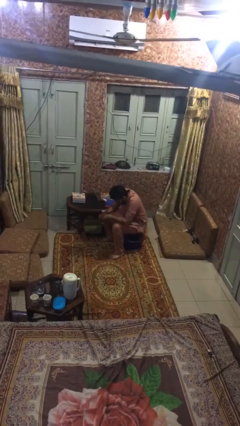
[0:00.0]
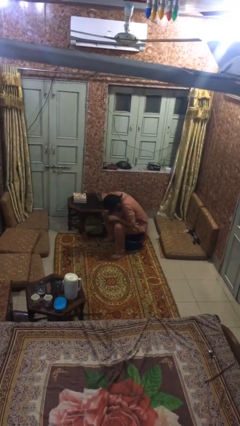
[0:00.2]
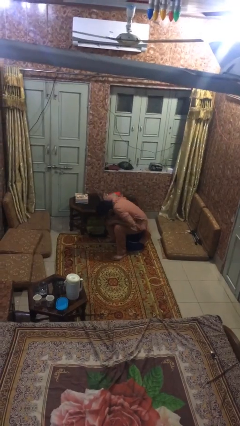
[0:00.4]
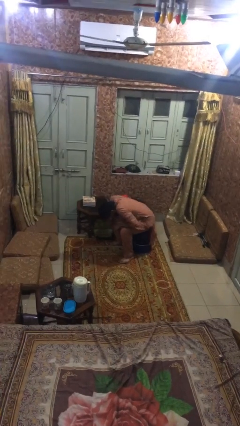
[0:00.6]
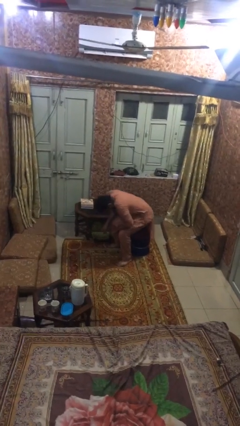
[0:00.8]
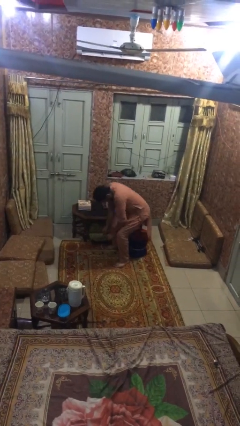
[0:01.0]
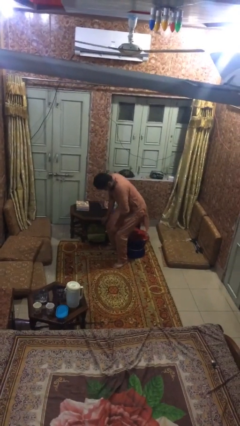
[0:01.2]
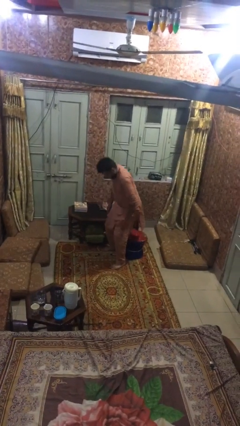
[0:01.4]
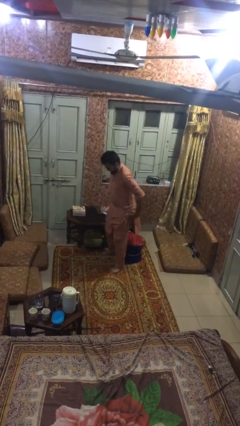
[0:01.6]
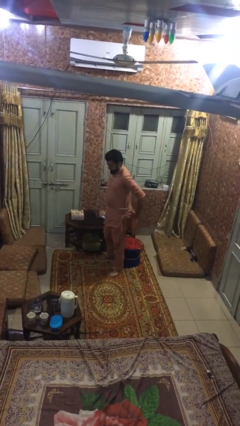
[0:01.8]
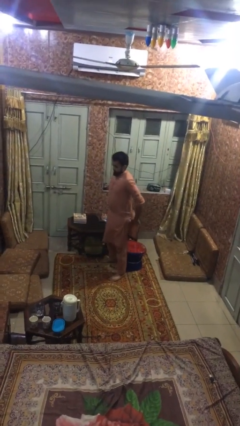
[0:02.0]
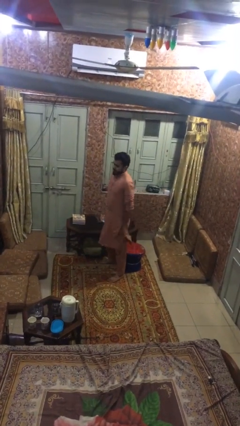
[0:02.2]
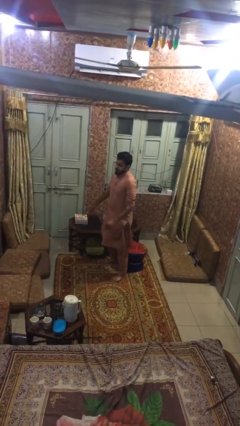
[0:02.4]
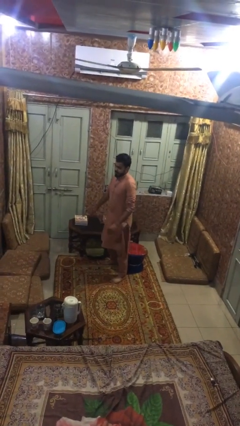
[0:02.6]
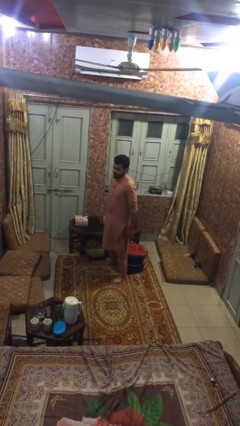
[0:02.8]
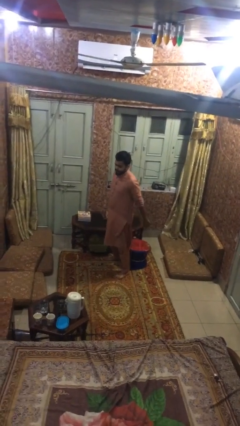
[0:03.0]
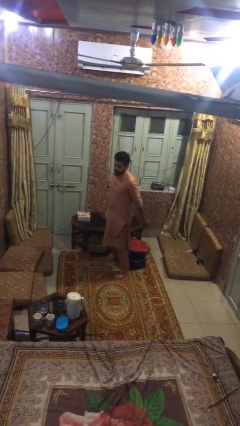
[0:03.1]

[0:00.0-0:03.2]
person stands up

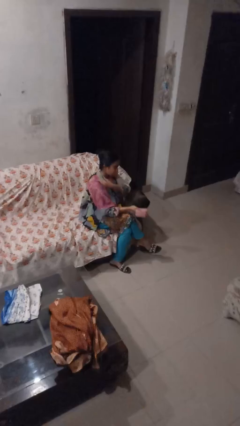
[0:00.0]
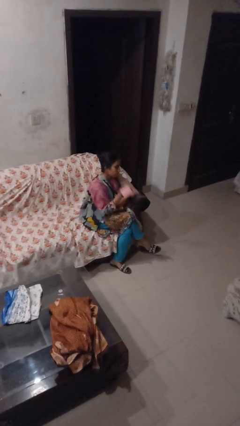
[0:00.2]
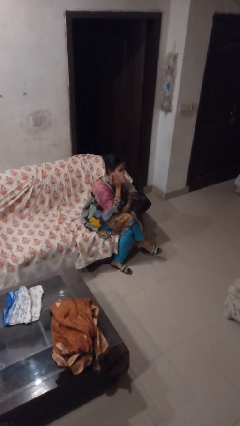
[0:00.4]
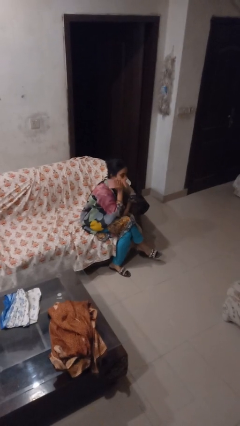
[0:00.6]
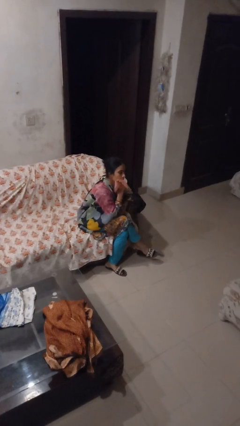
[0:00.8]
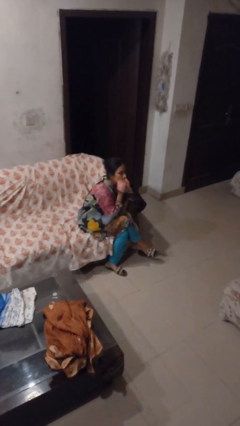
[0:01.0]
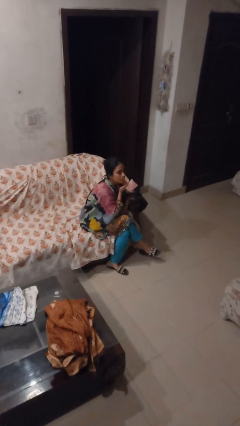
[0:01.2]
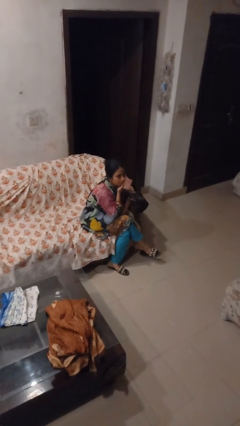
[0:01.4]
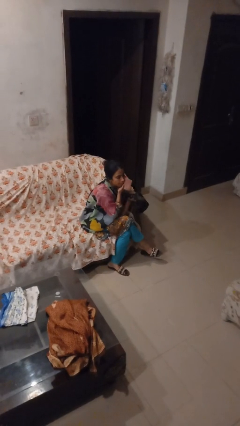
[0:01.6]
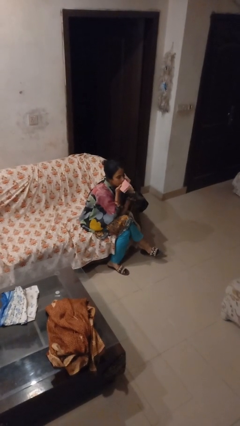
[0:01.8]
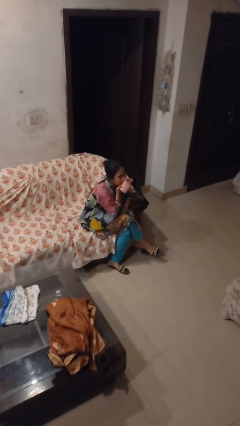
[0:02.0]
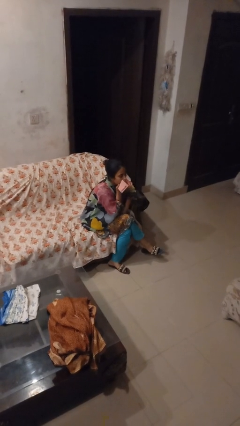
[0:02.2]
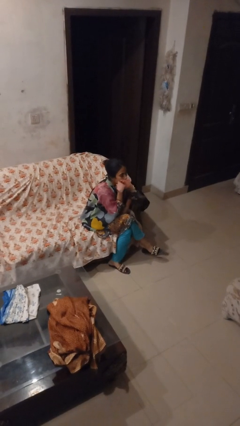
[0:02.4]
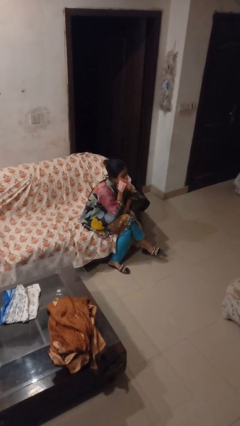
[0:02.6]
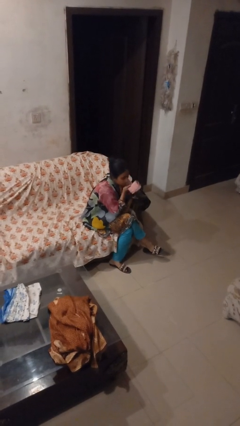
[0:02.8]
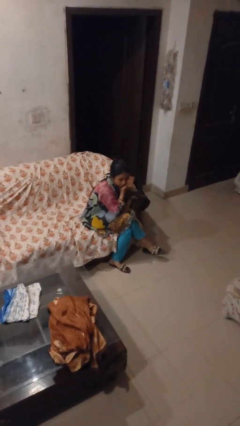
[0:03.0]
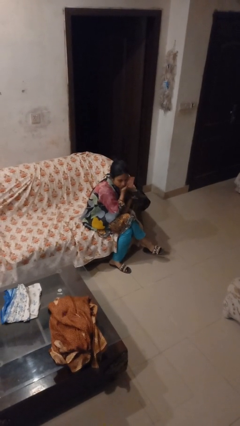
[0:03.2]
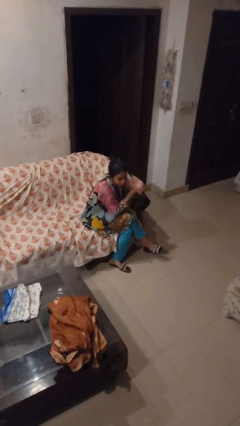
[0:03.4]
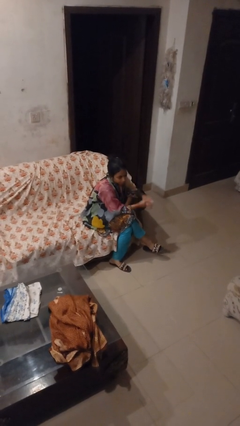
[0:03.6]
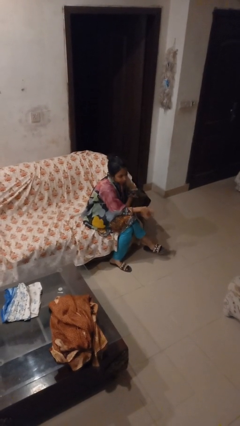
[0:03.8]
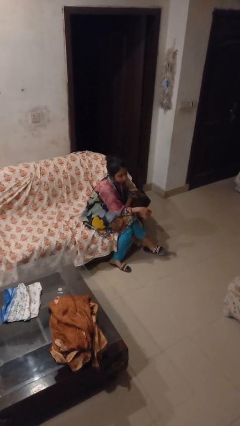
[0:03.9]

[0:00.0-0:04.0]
person wipes mouth with napkin

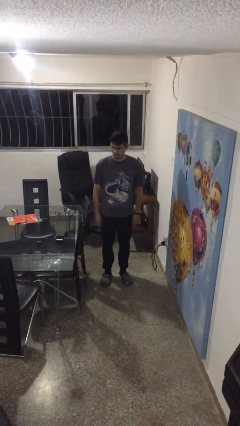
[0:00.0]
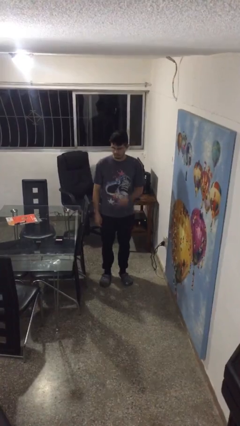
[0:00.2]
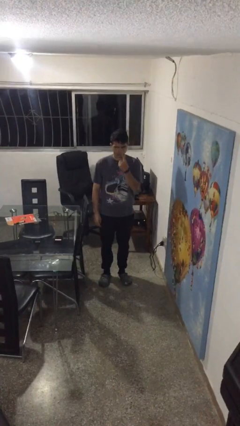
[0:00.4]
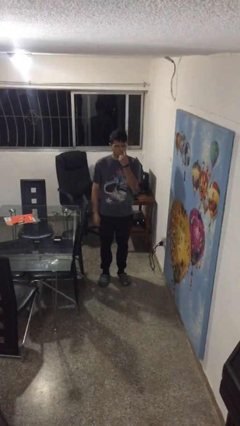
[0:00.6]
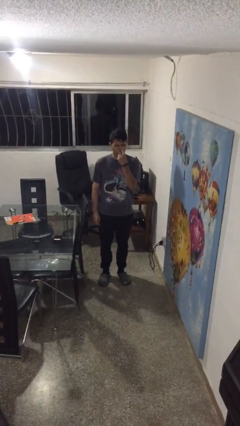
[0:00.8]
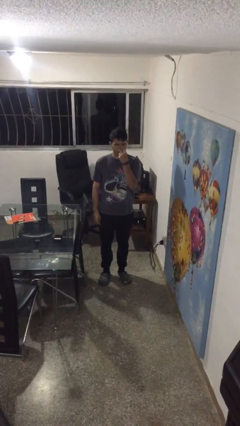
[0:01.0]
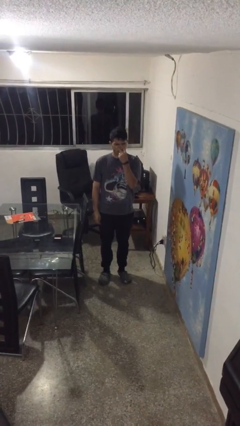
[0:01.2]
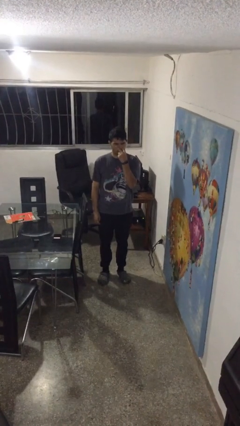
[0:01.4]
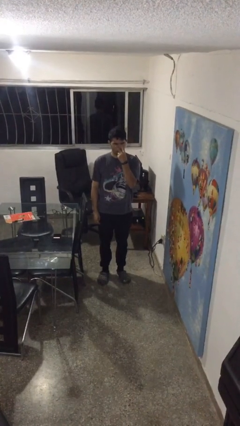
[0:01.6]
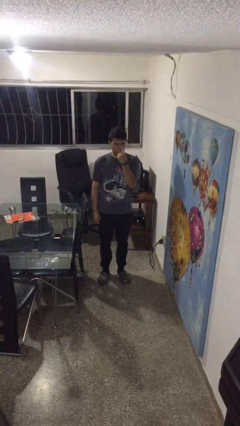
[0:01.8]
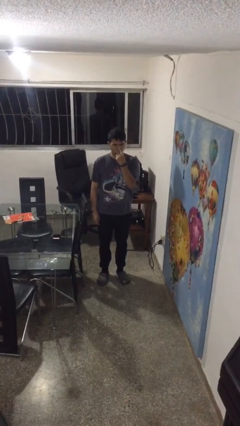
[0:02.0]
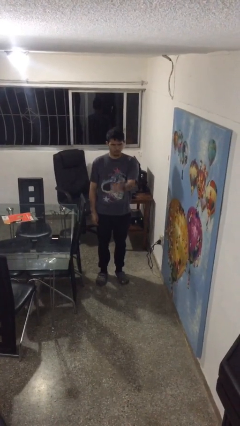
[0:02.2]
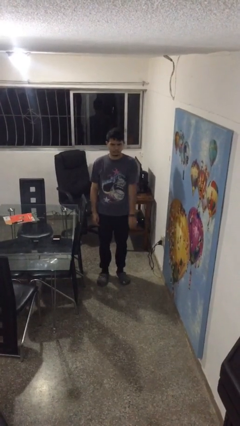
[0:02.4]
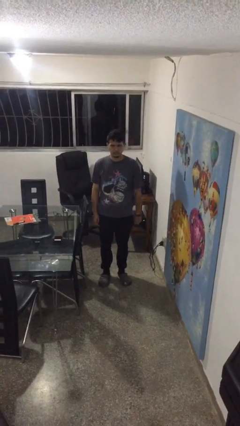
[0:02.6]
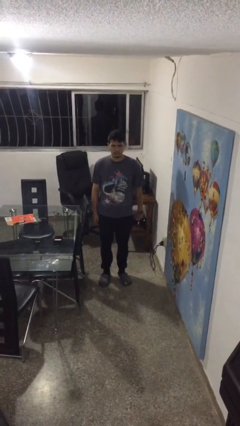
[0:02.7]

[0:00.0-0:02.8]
person gestures watch closely

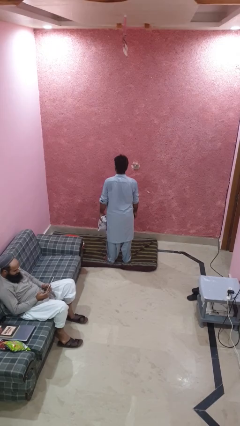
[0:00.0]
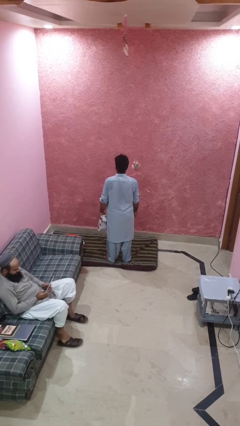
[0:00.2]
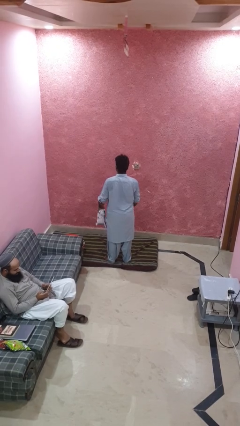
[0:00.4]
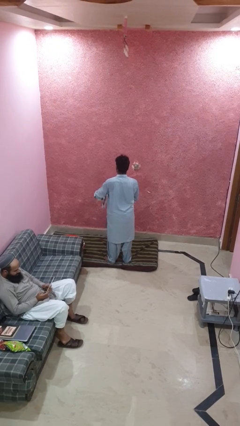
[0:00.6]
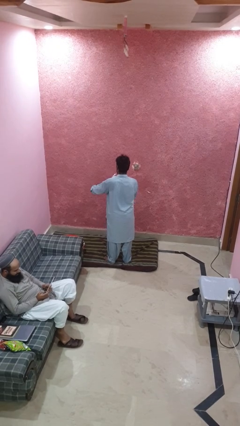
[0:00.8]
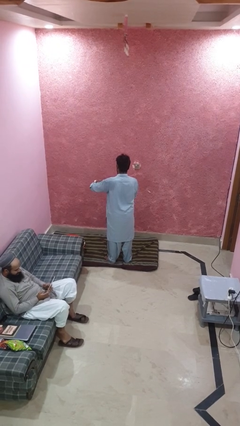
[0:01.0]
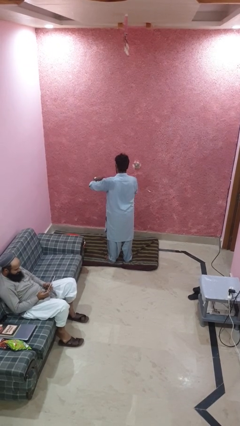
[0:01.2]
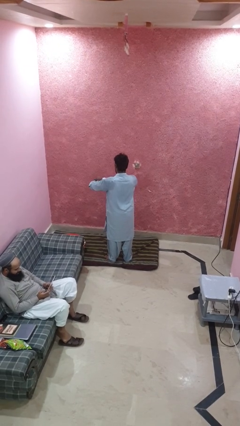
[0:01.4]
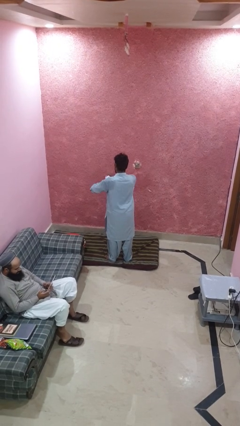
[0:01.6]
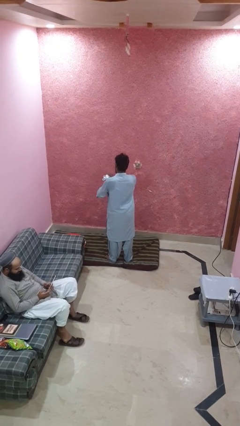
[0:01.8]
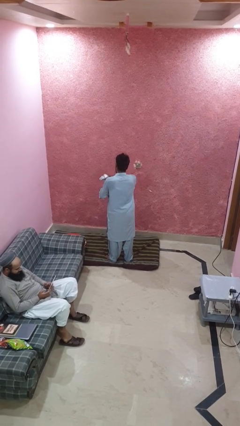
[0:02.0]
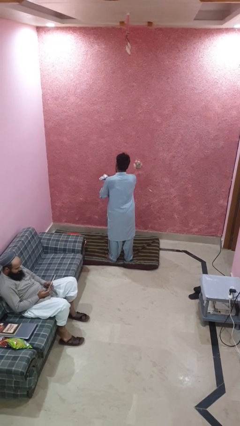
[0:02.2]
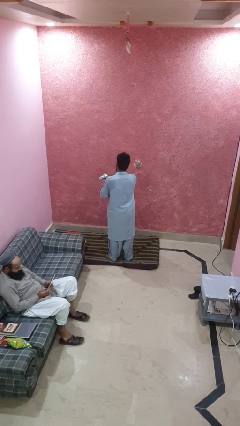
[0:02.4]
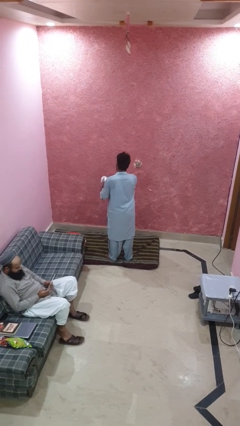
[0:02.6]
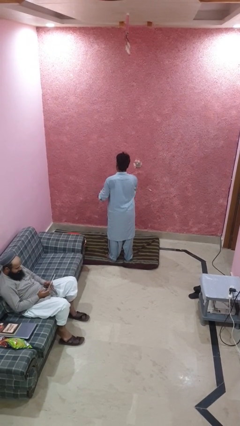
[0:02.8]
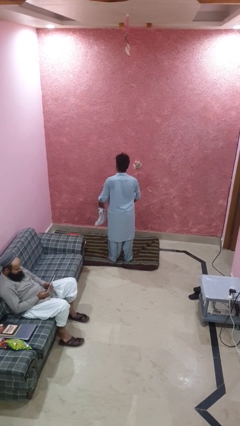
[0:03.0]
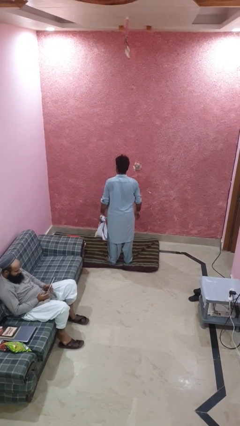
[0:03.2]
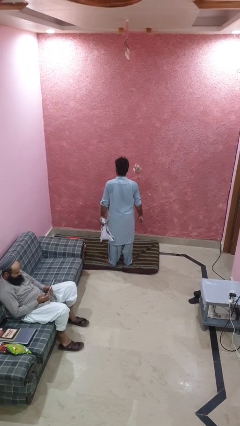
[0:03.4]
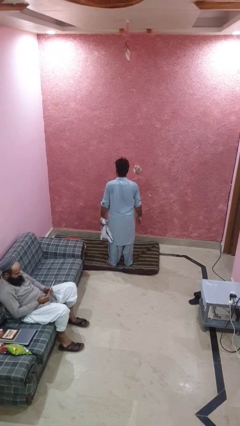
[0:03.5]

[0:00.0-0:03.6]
person squeezes object

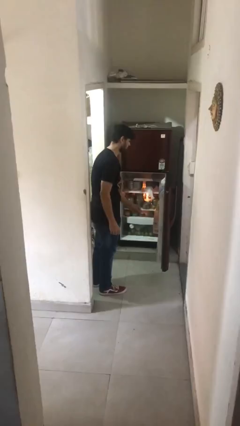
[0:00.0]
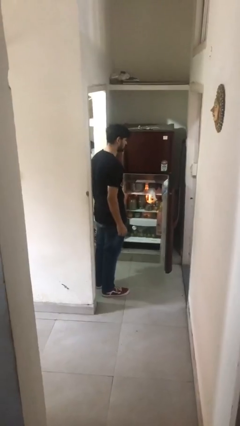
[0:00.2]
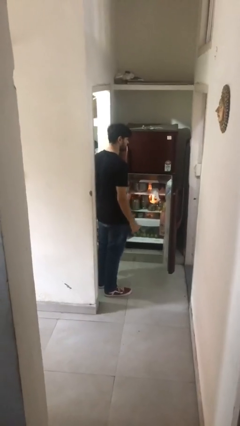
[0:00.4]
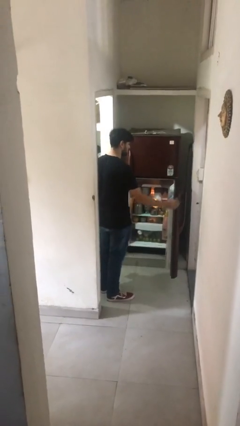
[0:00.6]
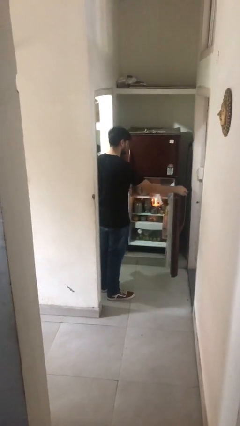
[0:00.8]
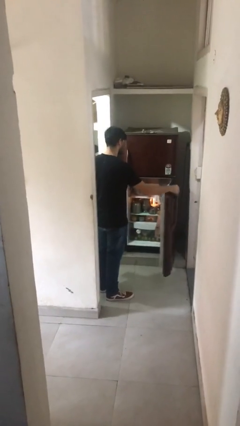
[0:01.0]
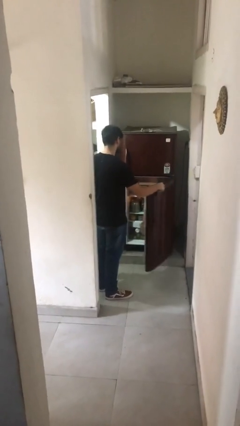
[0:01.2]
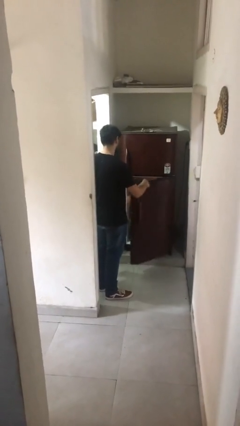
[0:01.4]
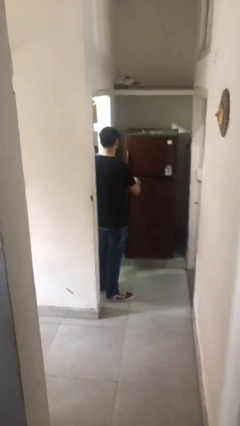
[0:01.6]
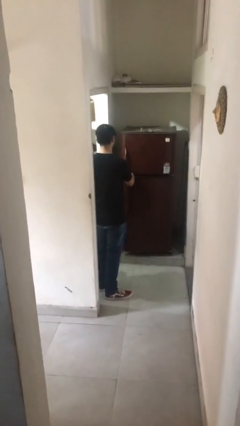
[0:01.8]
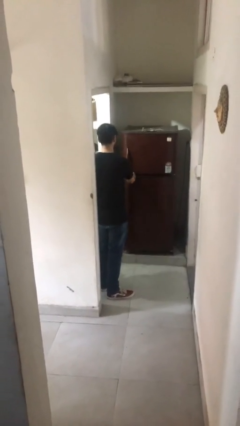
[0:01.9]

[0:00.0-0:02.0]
person closes refrigerator

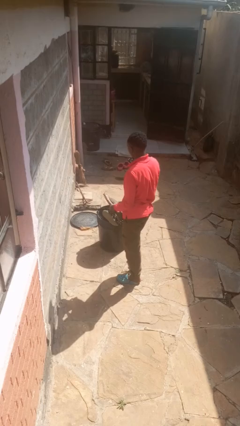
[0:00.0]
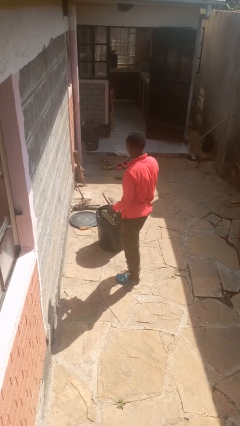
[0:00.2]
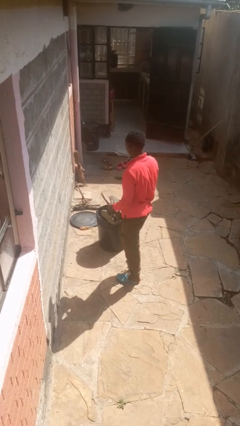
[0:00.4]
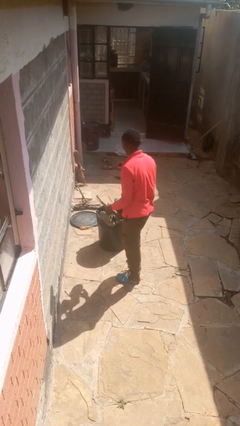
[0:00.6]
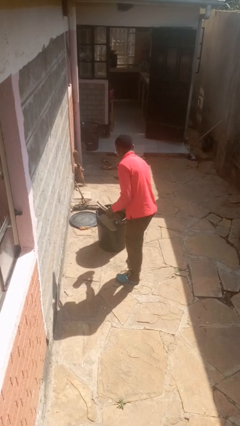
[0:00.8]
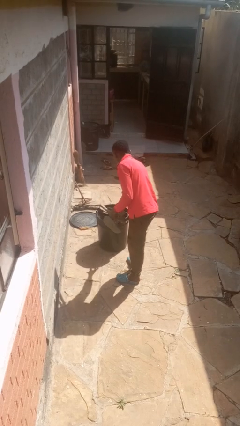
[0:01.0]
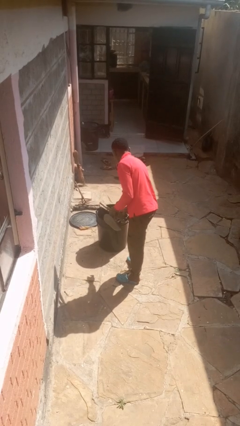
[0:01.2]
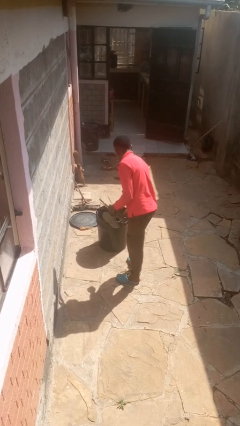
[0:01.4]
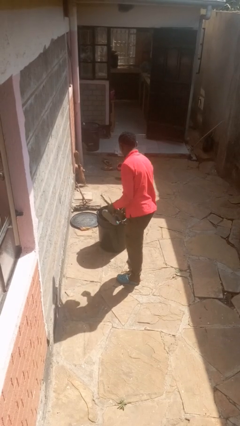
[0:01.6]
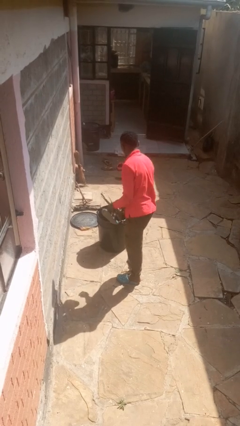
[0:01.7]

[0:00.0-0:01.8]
person discards trash

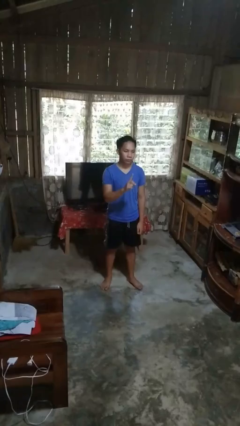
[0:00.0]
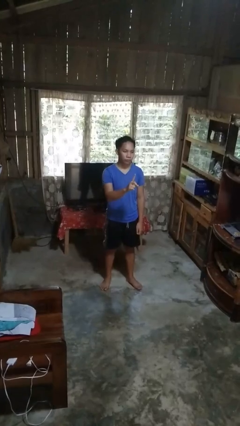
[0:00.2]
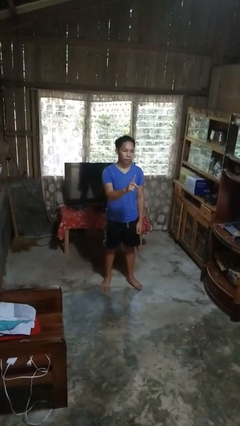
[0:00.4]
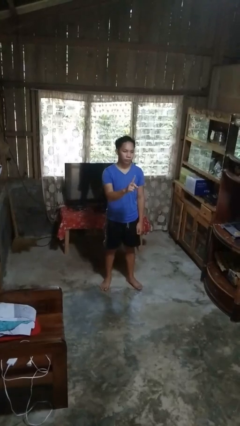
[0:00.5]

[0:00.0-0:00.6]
person gestures number one
